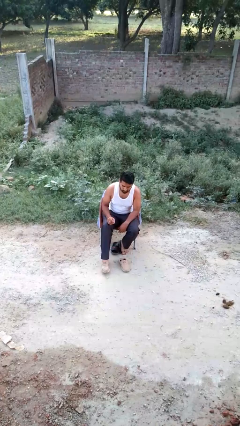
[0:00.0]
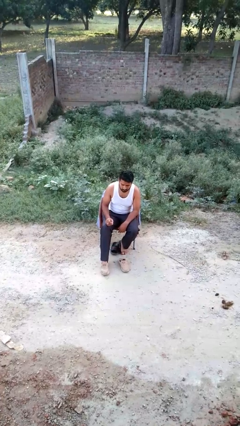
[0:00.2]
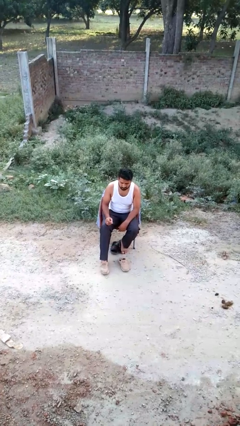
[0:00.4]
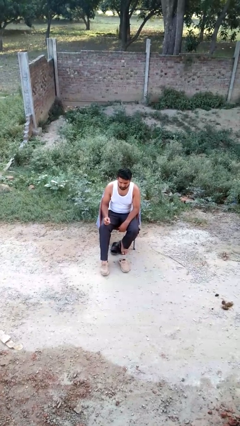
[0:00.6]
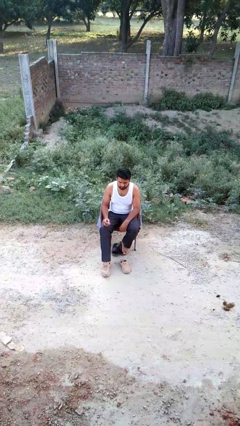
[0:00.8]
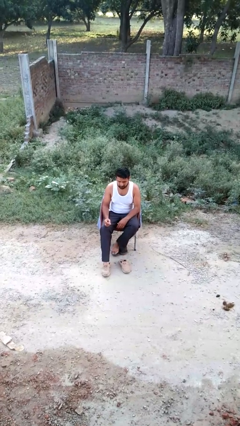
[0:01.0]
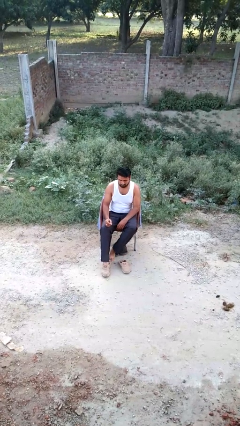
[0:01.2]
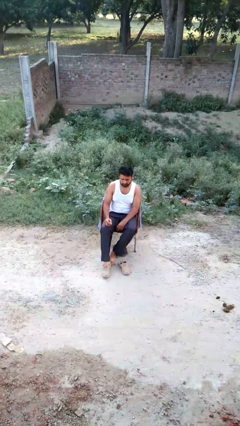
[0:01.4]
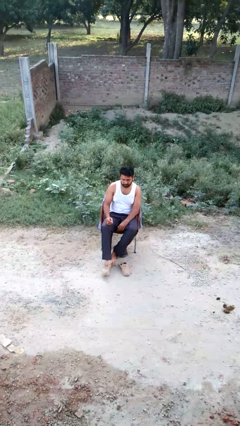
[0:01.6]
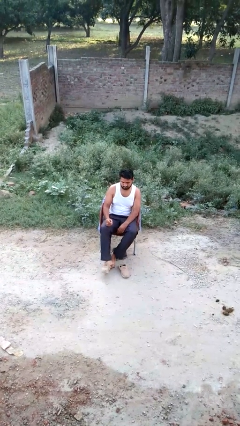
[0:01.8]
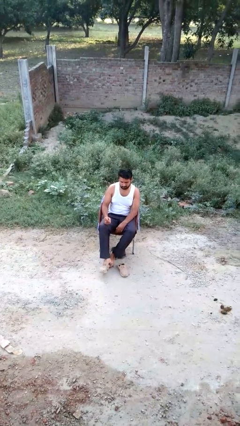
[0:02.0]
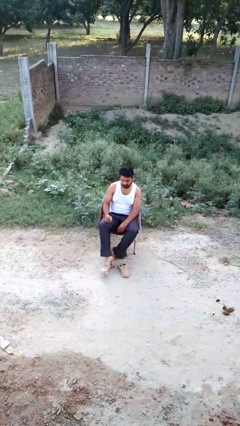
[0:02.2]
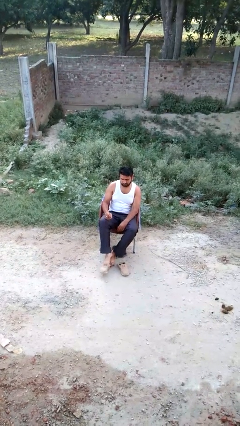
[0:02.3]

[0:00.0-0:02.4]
person takes off shoes

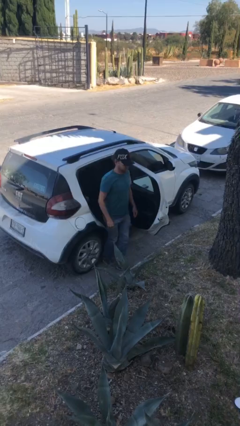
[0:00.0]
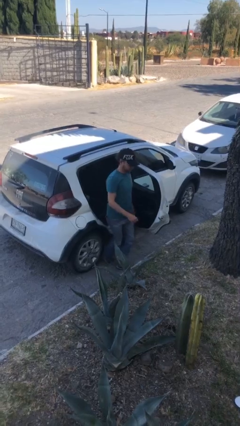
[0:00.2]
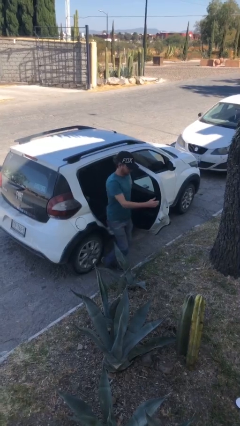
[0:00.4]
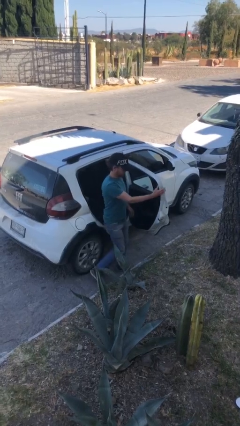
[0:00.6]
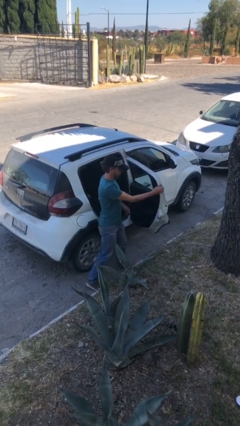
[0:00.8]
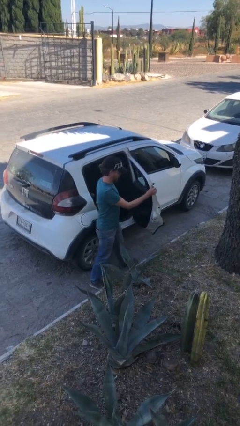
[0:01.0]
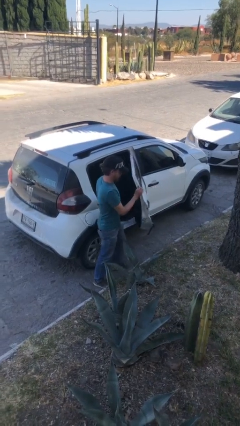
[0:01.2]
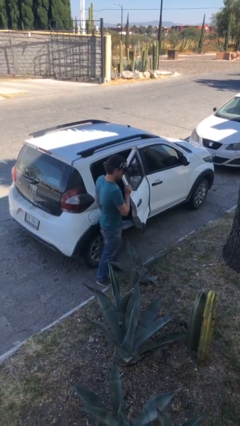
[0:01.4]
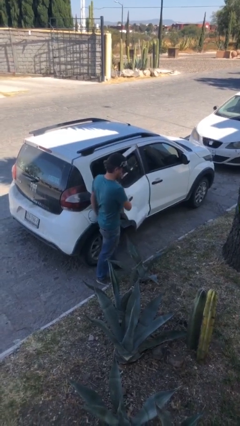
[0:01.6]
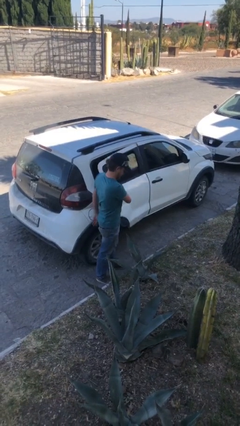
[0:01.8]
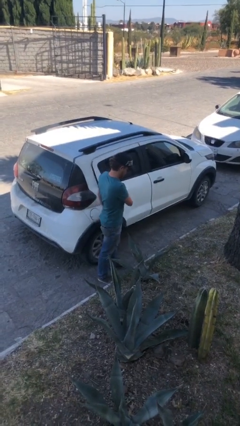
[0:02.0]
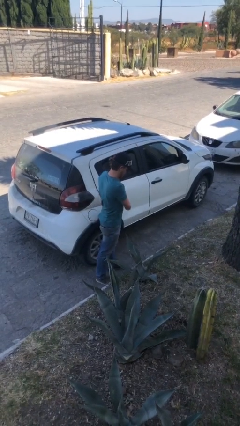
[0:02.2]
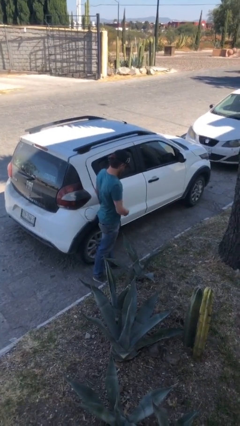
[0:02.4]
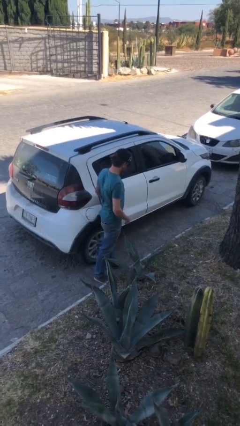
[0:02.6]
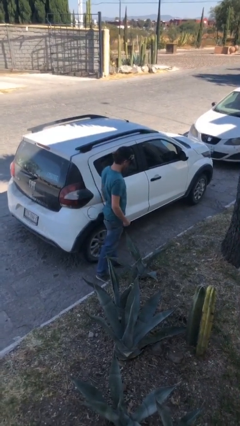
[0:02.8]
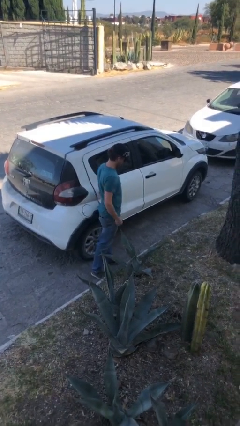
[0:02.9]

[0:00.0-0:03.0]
person closes car door

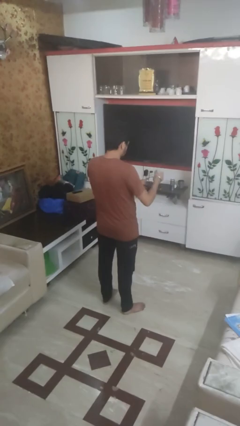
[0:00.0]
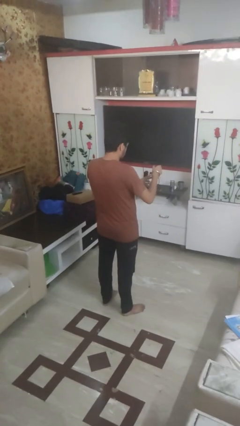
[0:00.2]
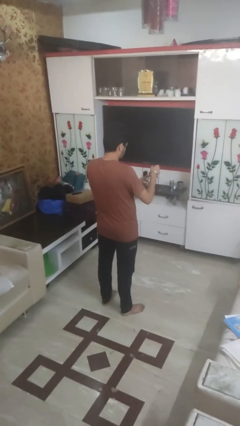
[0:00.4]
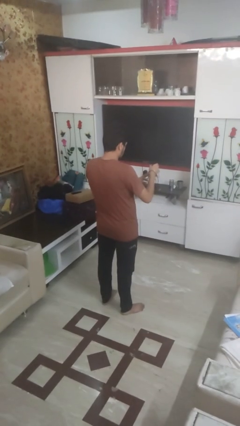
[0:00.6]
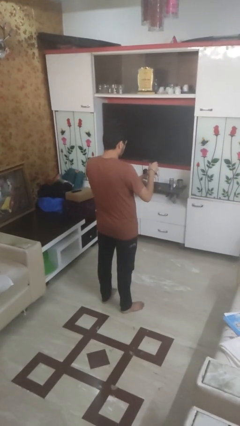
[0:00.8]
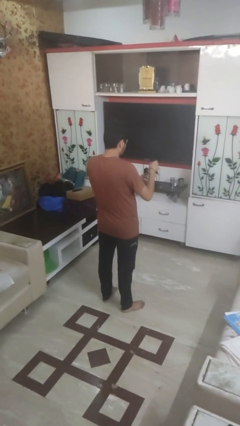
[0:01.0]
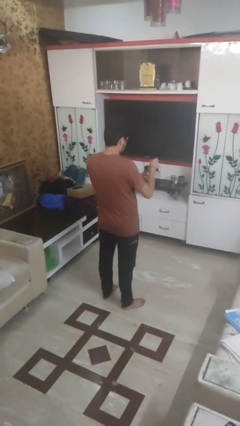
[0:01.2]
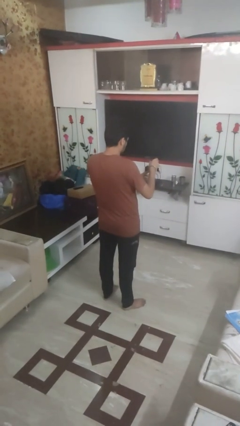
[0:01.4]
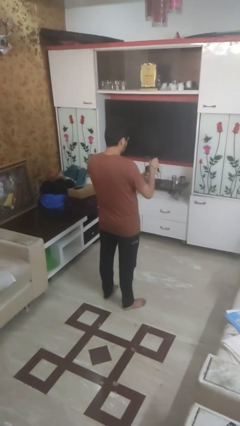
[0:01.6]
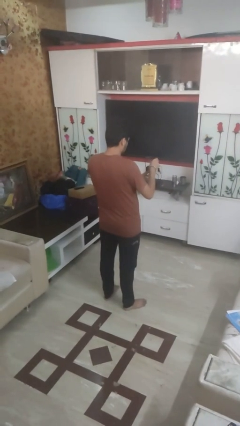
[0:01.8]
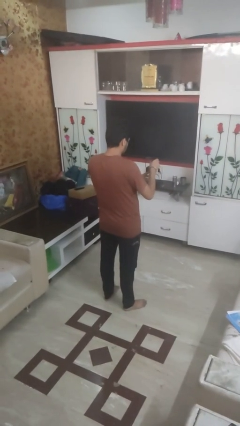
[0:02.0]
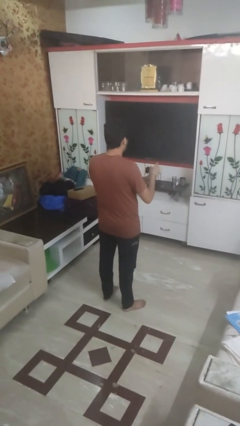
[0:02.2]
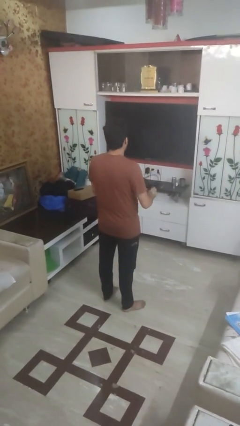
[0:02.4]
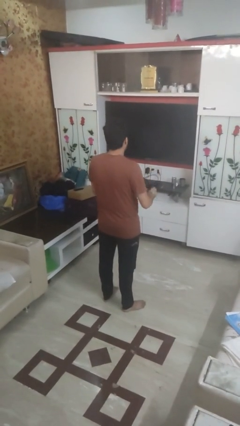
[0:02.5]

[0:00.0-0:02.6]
person clips fingernails

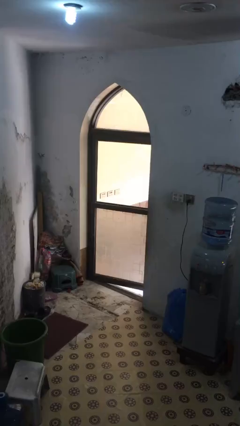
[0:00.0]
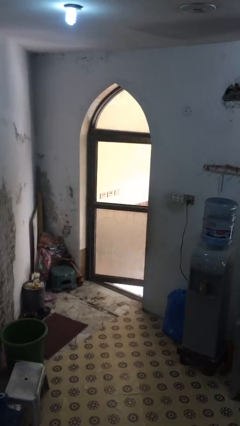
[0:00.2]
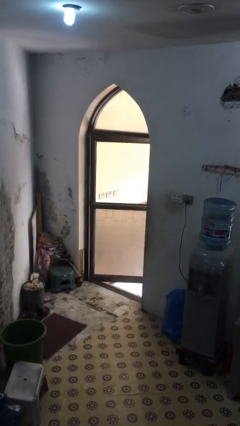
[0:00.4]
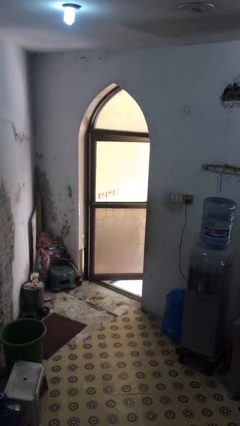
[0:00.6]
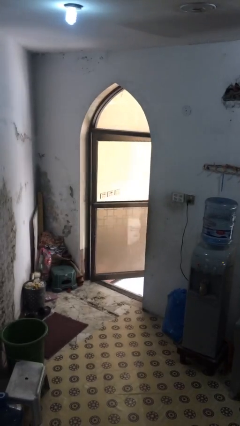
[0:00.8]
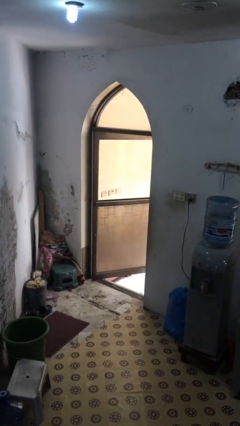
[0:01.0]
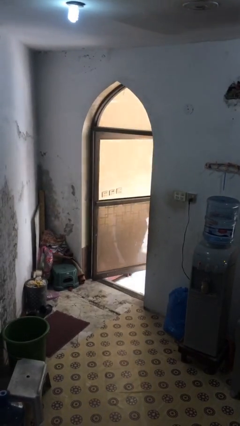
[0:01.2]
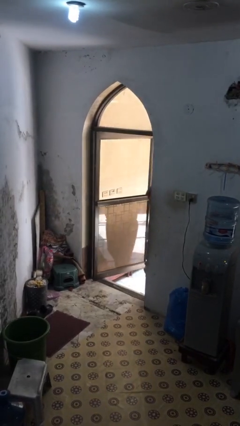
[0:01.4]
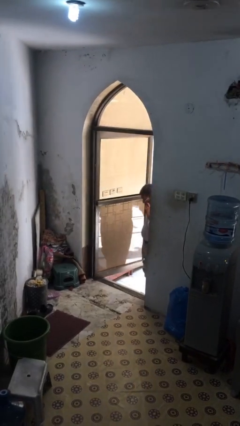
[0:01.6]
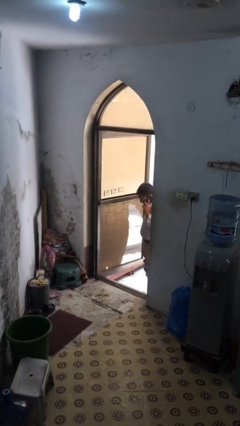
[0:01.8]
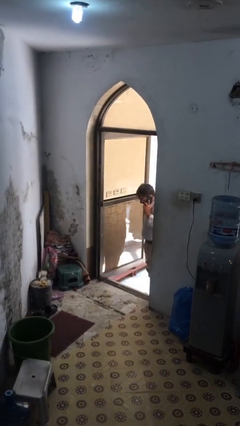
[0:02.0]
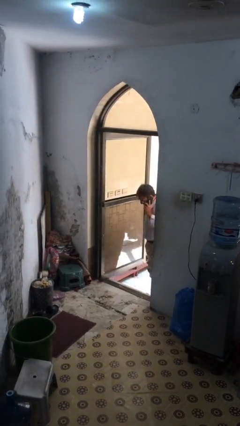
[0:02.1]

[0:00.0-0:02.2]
person opens facility door

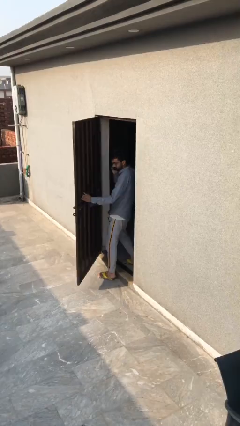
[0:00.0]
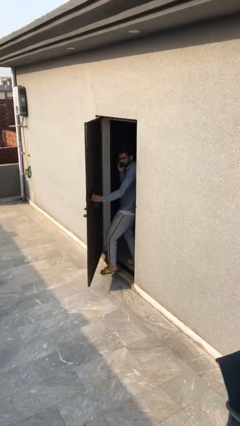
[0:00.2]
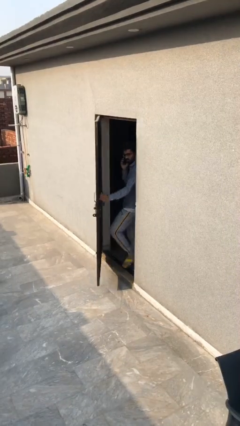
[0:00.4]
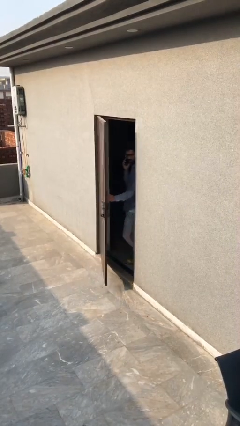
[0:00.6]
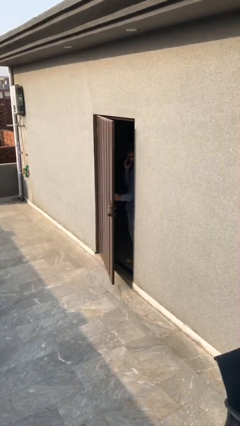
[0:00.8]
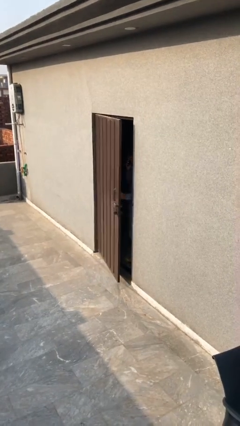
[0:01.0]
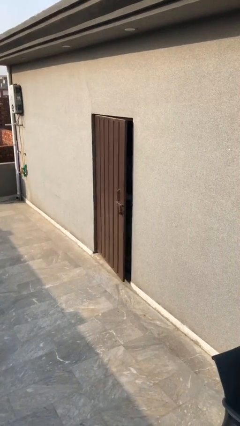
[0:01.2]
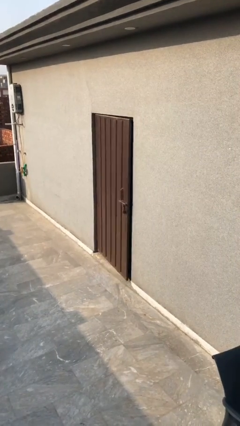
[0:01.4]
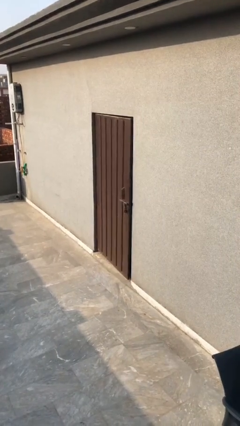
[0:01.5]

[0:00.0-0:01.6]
person closes facility door

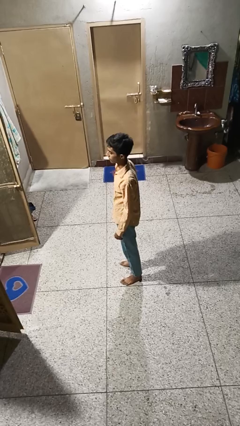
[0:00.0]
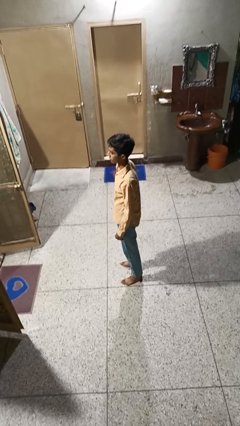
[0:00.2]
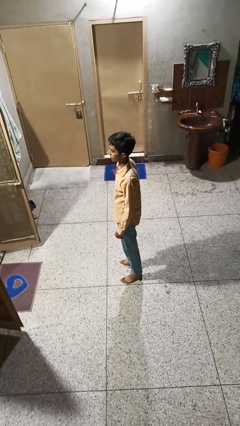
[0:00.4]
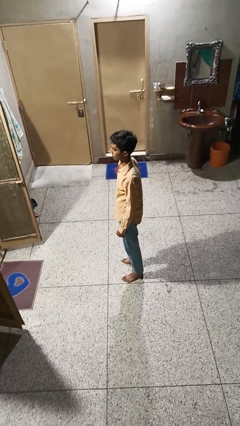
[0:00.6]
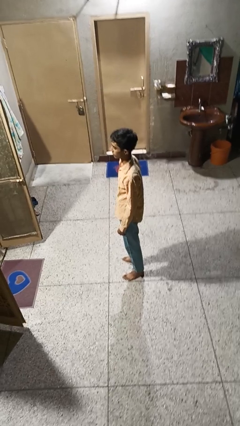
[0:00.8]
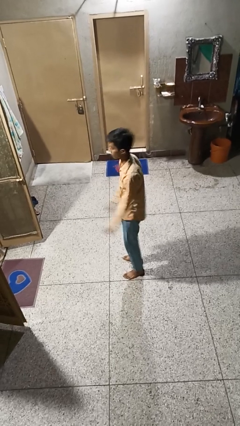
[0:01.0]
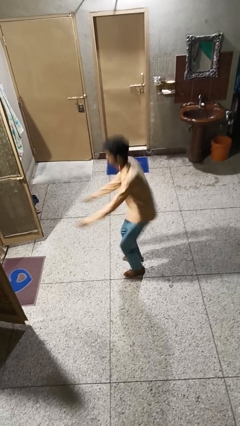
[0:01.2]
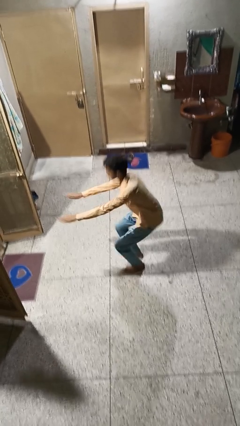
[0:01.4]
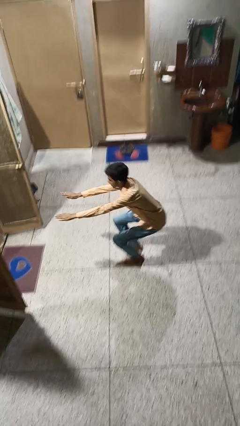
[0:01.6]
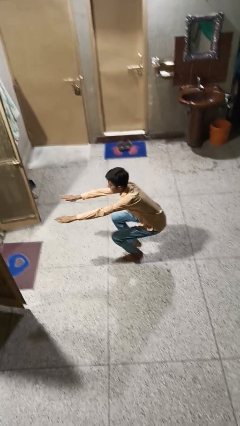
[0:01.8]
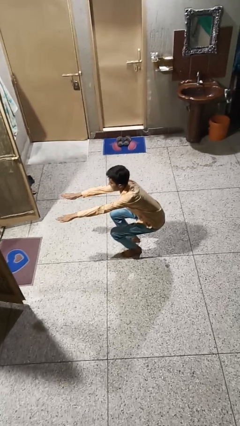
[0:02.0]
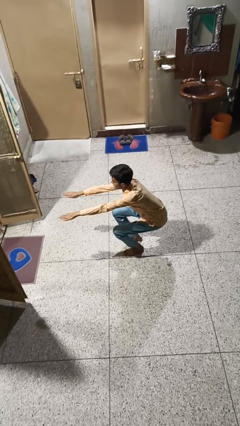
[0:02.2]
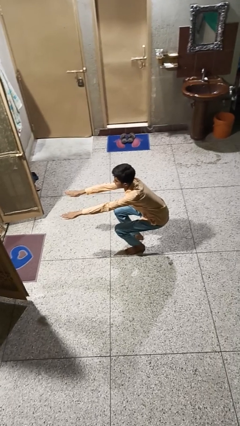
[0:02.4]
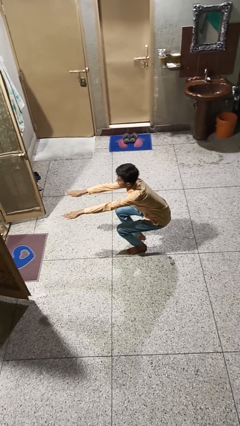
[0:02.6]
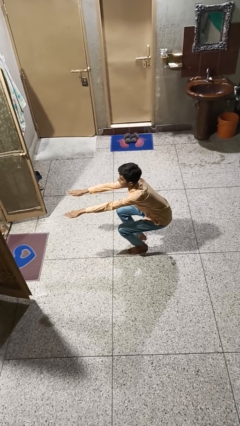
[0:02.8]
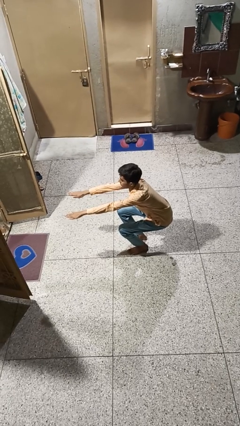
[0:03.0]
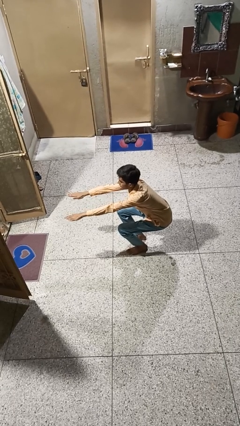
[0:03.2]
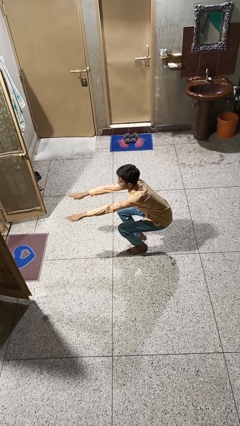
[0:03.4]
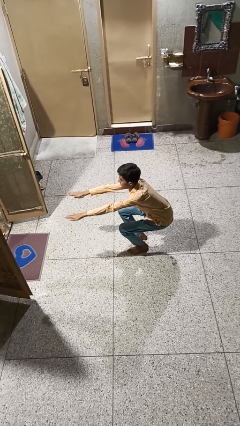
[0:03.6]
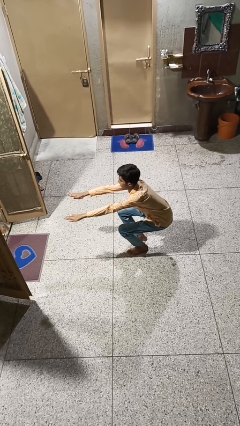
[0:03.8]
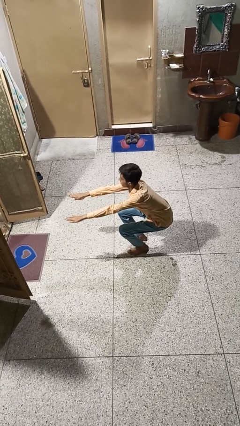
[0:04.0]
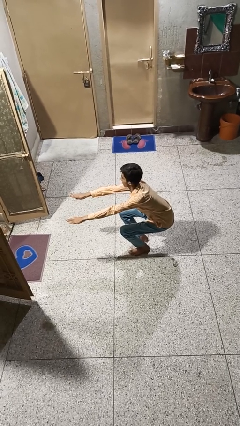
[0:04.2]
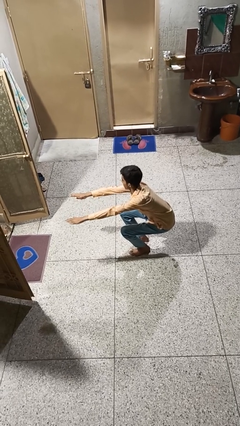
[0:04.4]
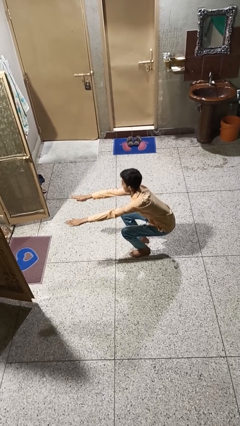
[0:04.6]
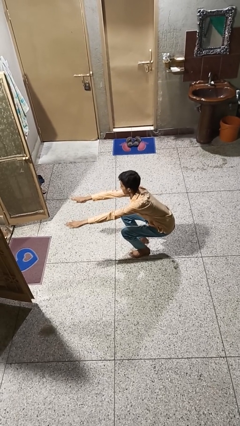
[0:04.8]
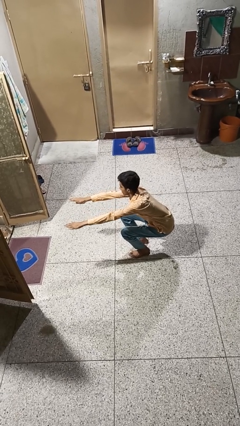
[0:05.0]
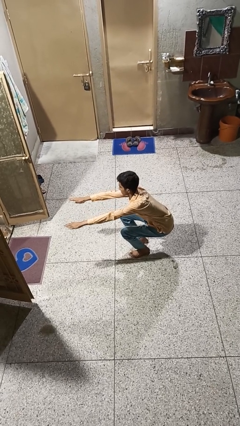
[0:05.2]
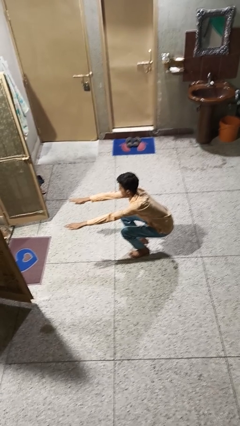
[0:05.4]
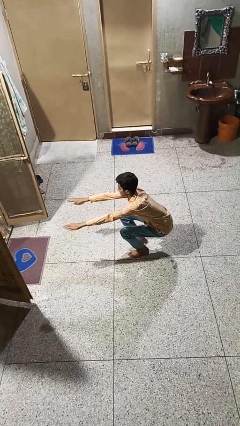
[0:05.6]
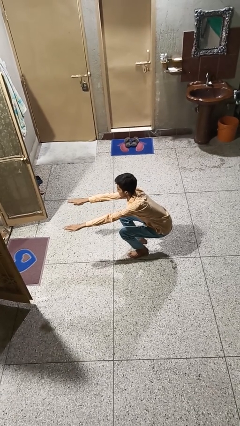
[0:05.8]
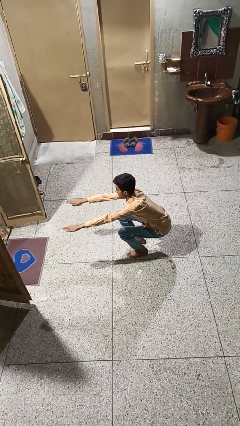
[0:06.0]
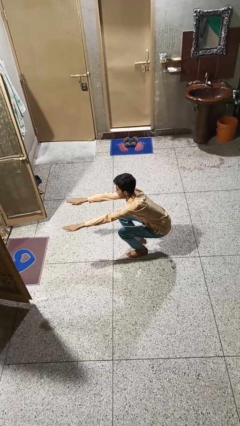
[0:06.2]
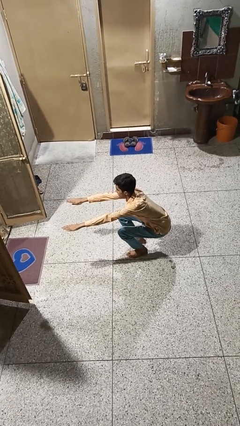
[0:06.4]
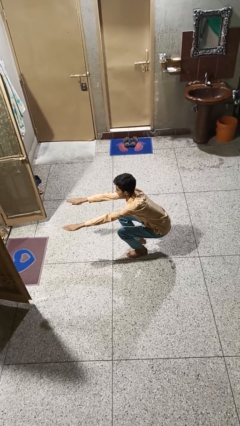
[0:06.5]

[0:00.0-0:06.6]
person squats
